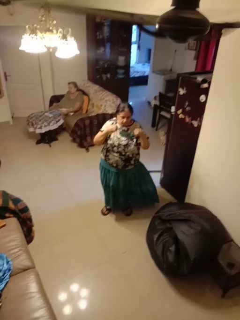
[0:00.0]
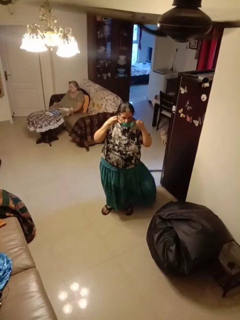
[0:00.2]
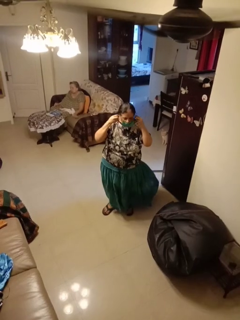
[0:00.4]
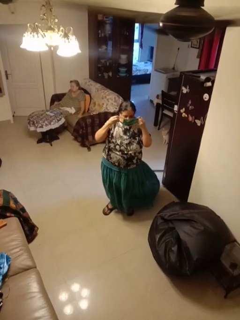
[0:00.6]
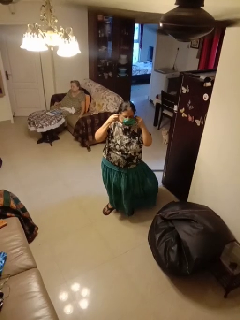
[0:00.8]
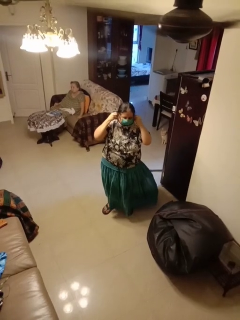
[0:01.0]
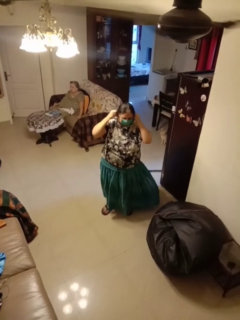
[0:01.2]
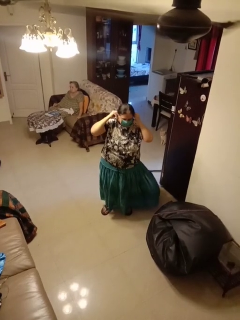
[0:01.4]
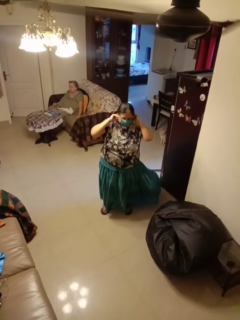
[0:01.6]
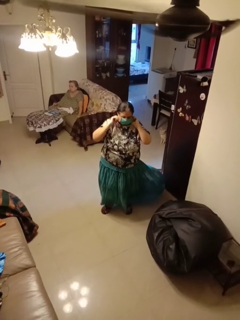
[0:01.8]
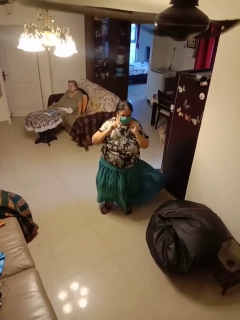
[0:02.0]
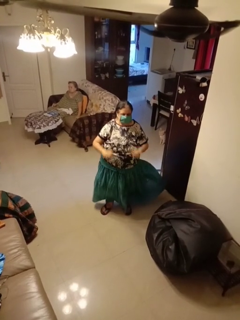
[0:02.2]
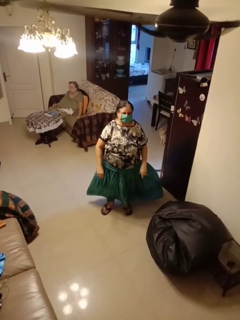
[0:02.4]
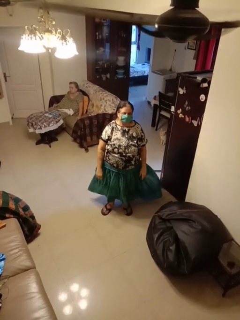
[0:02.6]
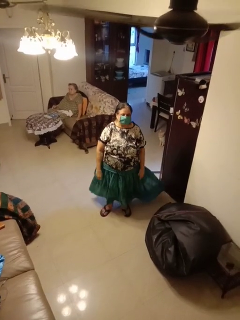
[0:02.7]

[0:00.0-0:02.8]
person puts on facemask

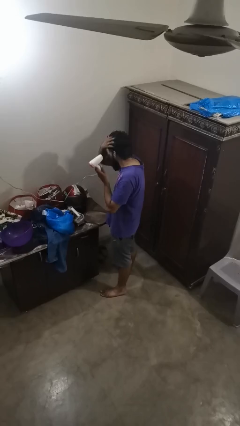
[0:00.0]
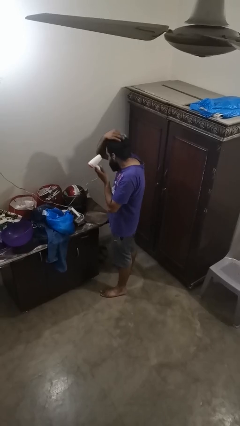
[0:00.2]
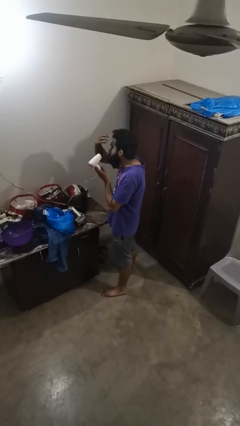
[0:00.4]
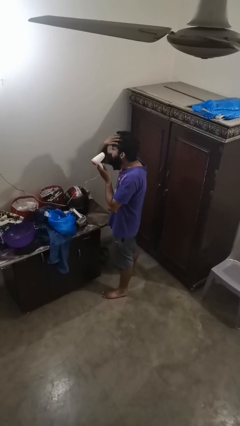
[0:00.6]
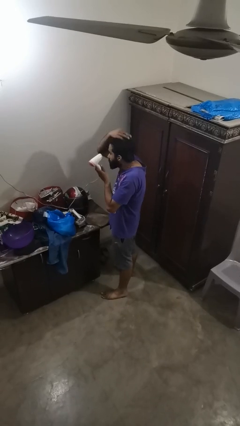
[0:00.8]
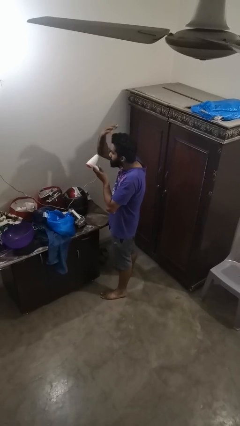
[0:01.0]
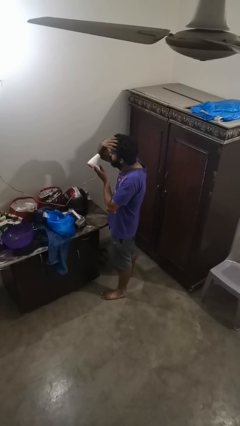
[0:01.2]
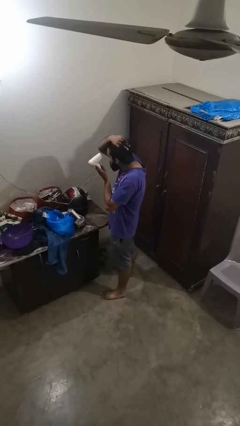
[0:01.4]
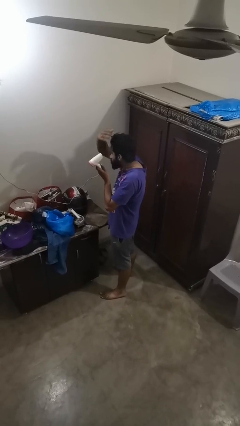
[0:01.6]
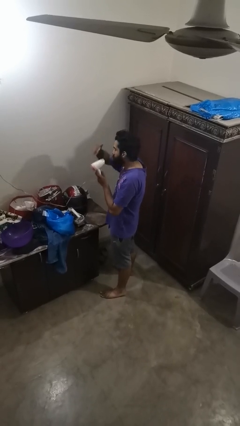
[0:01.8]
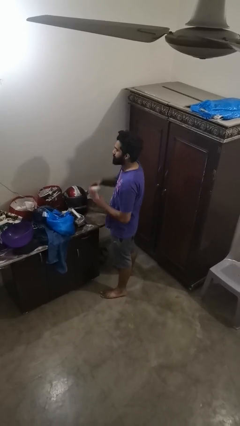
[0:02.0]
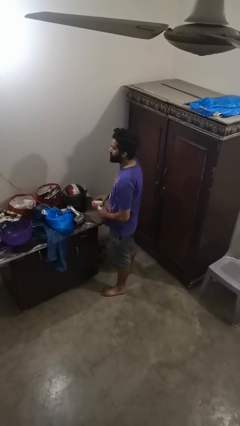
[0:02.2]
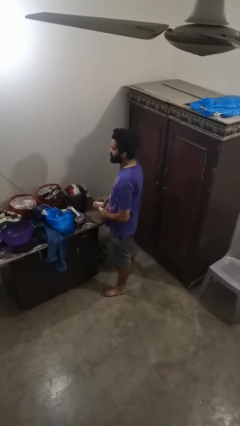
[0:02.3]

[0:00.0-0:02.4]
person dries hair with hairdryer

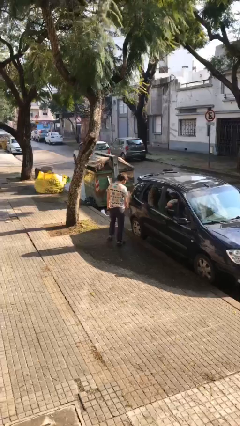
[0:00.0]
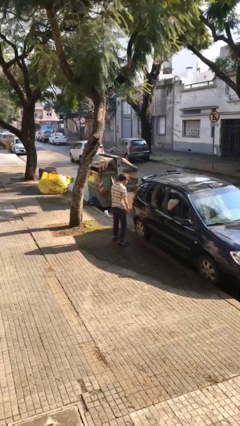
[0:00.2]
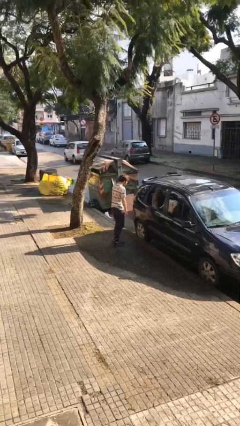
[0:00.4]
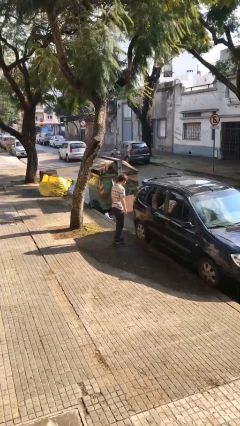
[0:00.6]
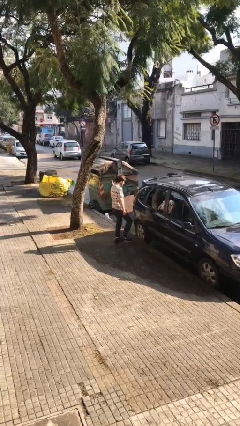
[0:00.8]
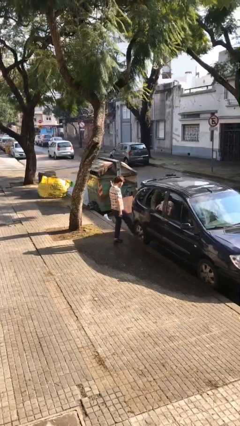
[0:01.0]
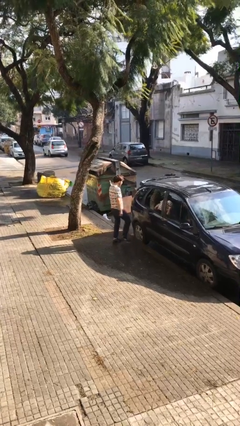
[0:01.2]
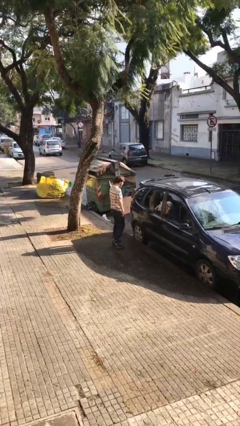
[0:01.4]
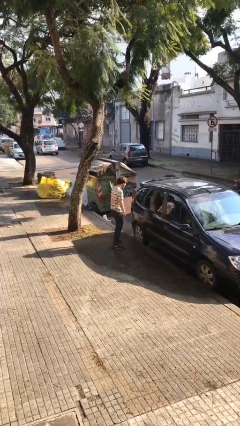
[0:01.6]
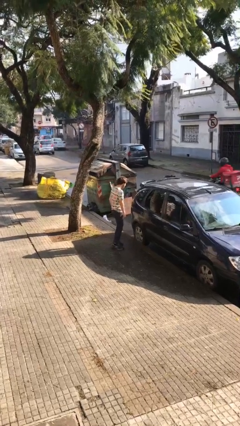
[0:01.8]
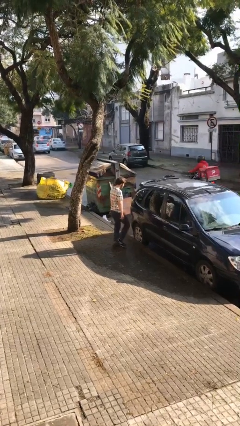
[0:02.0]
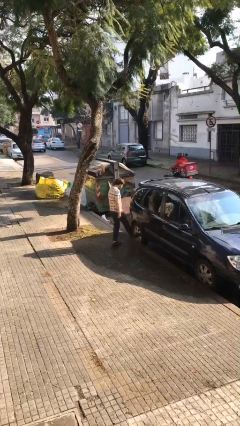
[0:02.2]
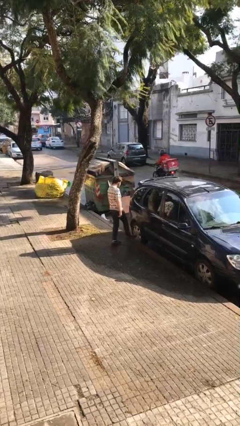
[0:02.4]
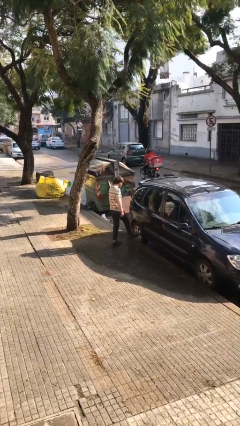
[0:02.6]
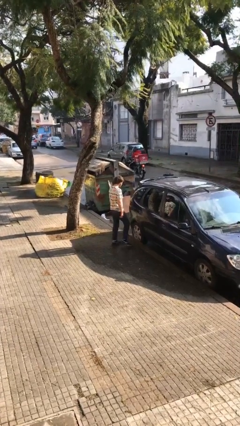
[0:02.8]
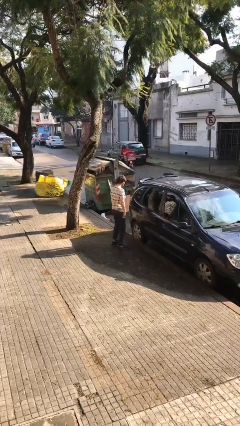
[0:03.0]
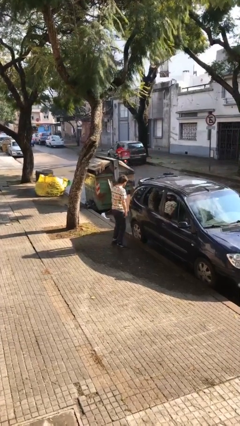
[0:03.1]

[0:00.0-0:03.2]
person kicks car tires

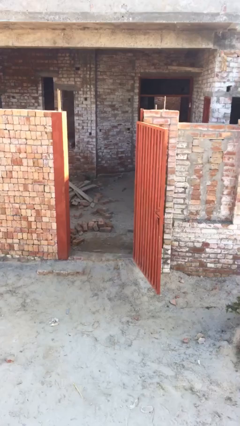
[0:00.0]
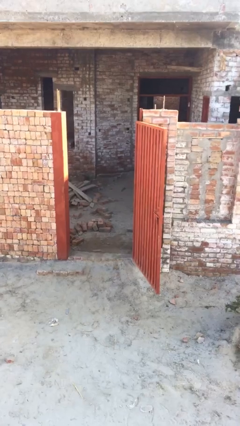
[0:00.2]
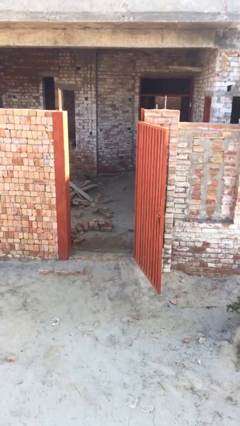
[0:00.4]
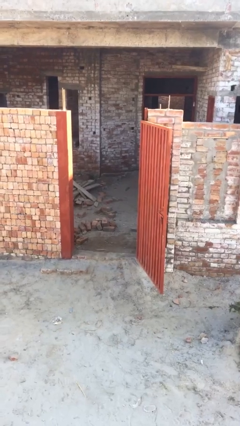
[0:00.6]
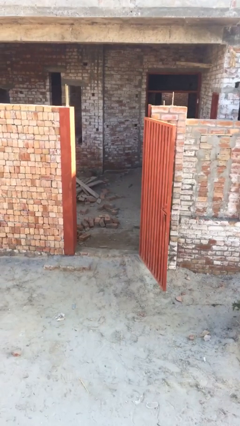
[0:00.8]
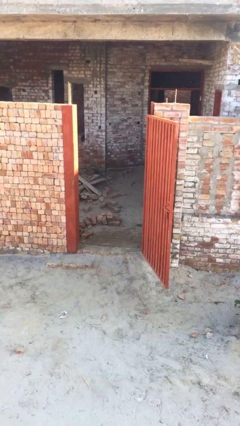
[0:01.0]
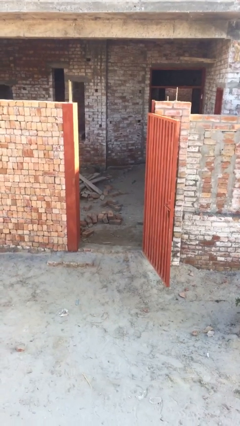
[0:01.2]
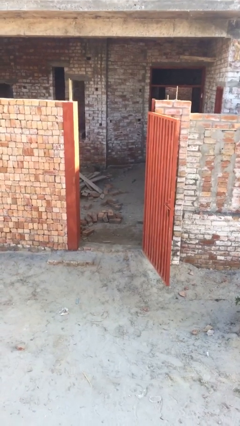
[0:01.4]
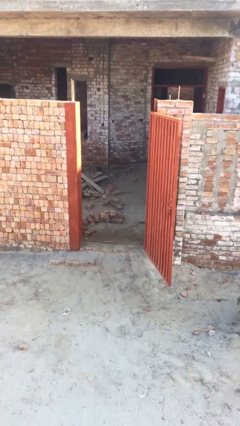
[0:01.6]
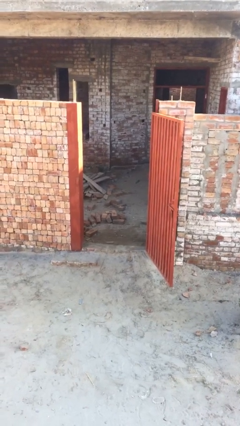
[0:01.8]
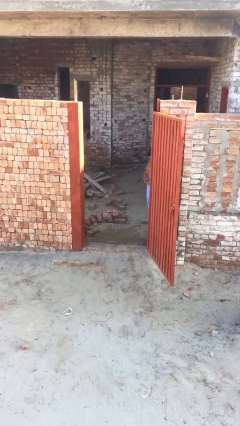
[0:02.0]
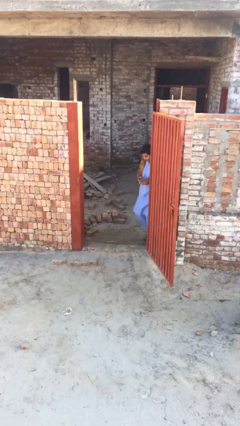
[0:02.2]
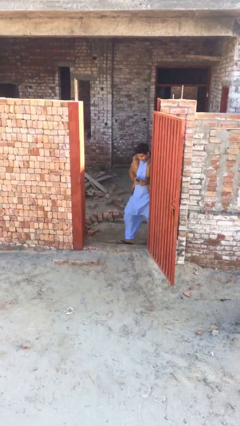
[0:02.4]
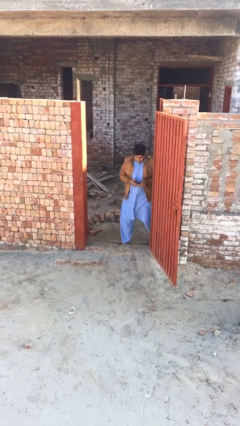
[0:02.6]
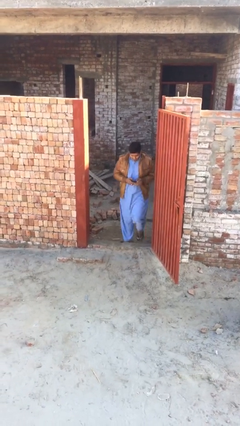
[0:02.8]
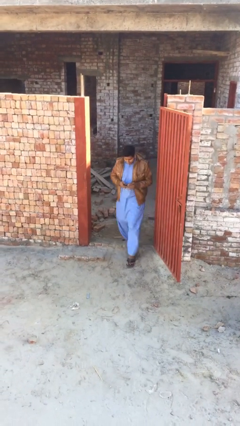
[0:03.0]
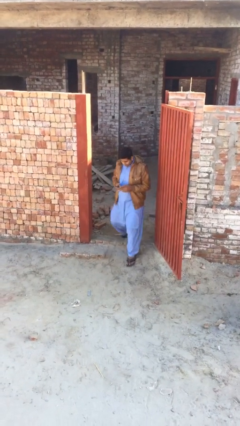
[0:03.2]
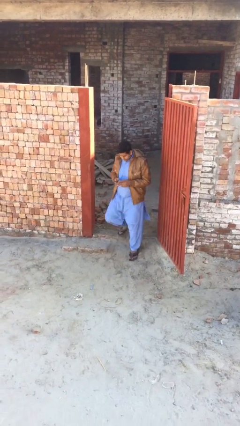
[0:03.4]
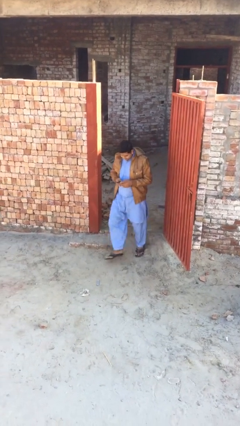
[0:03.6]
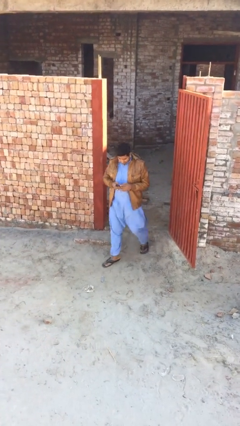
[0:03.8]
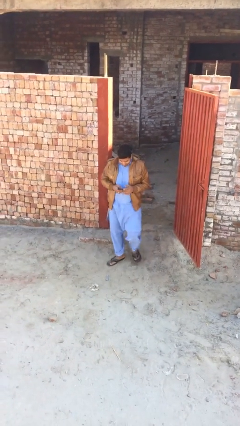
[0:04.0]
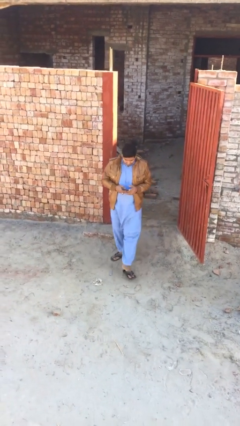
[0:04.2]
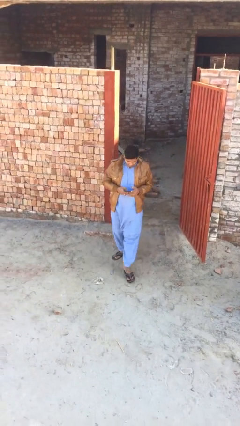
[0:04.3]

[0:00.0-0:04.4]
person enters scene through structure

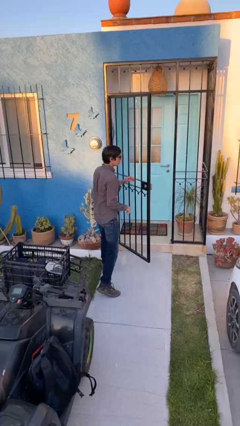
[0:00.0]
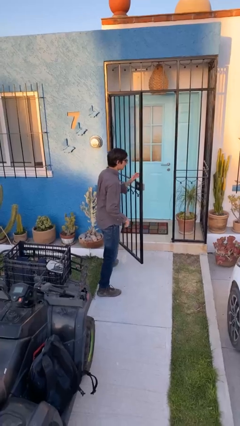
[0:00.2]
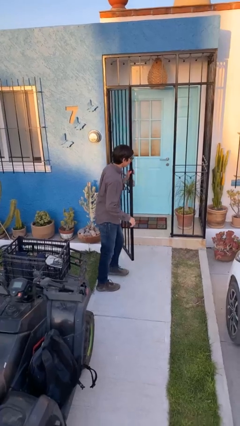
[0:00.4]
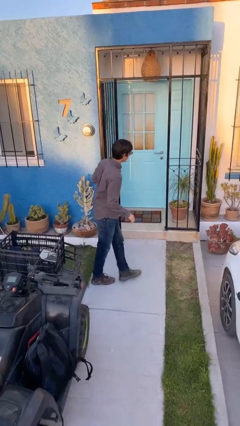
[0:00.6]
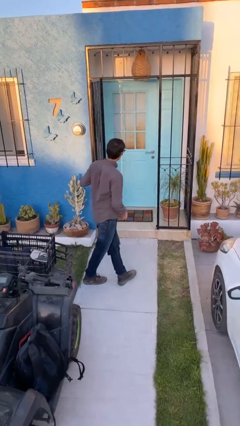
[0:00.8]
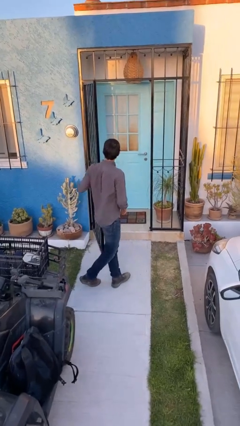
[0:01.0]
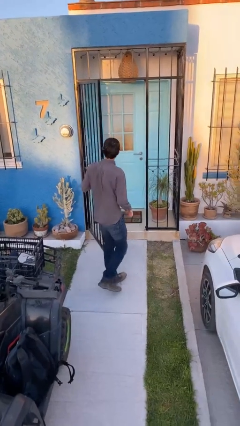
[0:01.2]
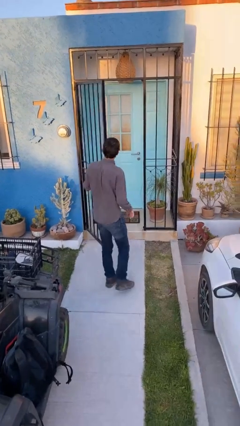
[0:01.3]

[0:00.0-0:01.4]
person opens facility door

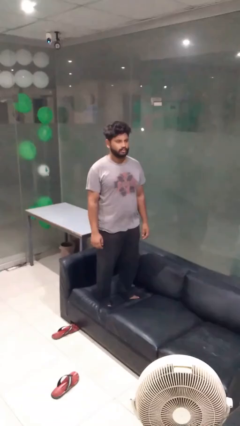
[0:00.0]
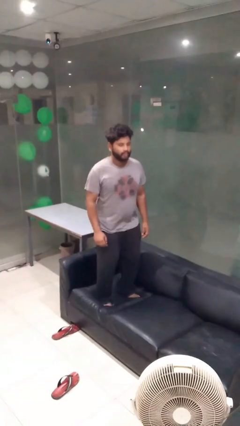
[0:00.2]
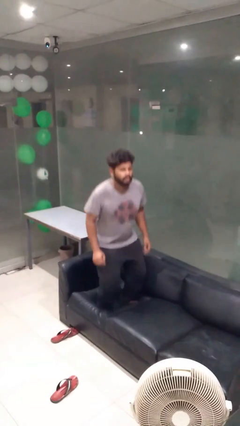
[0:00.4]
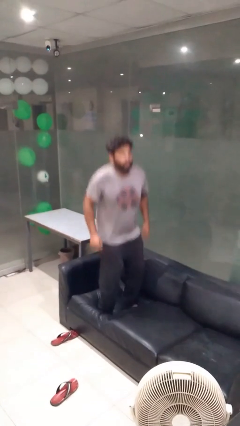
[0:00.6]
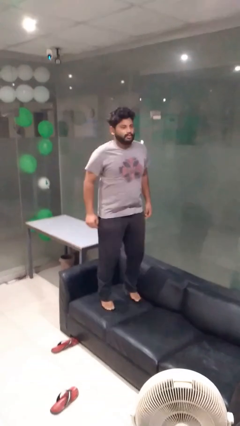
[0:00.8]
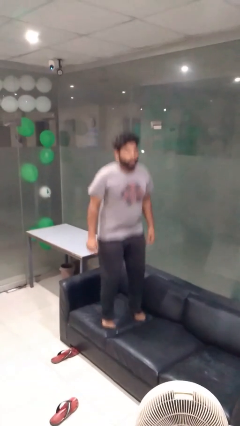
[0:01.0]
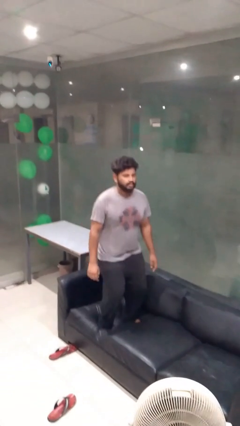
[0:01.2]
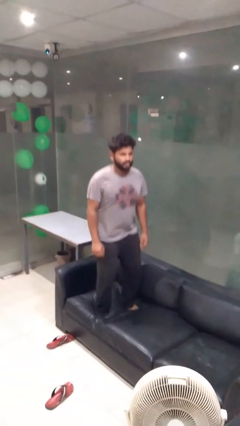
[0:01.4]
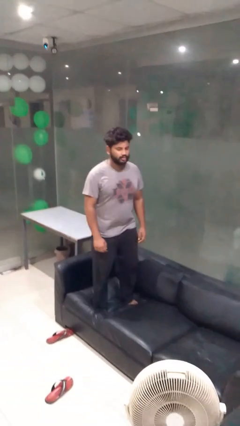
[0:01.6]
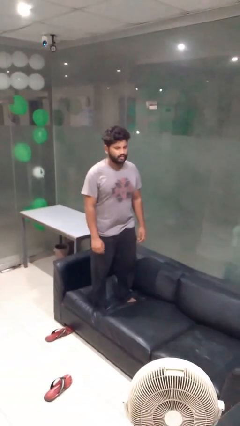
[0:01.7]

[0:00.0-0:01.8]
person jumps on couch

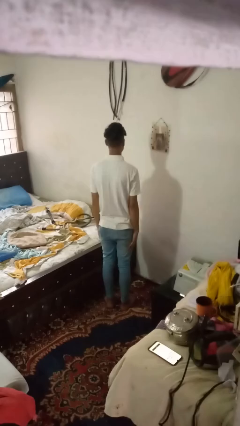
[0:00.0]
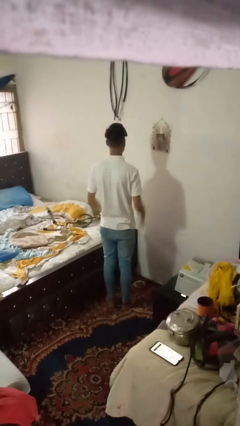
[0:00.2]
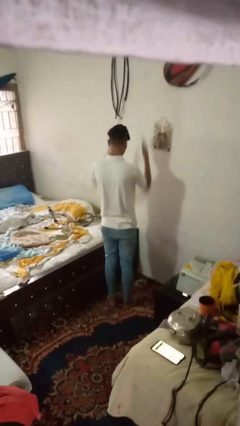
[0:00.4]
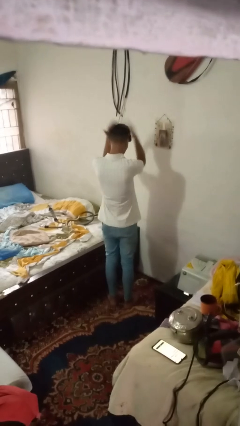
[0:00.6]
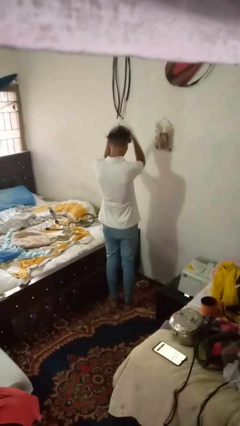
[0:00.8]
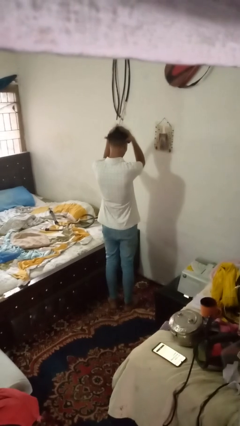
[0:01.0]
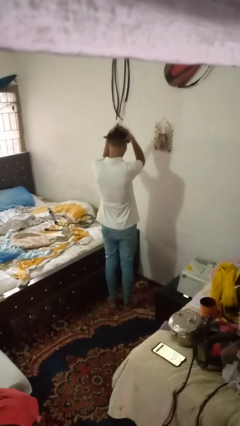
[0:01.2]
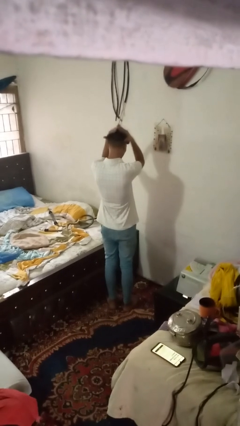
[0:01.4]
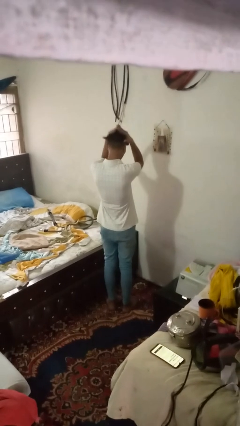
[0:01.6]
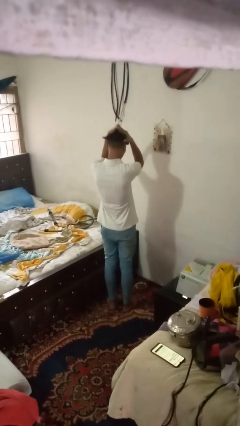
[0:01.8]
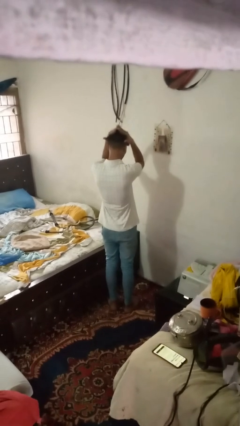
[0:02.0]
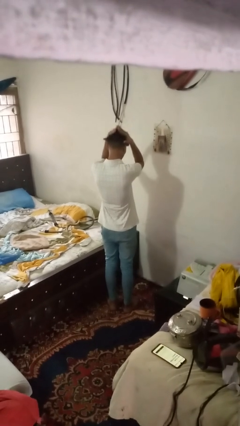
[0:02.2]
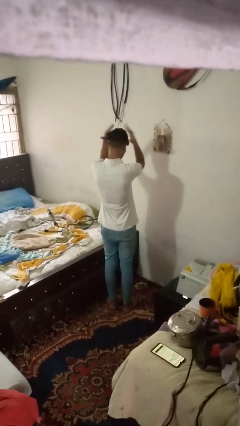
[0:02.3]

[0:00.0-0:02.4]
person pats head
